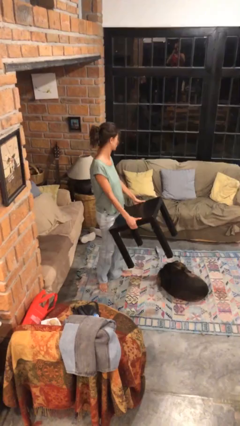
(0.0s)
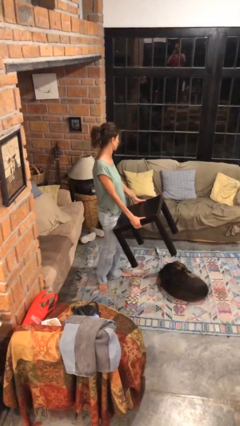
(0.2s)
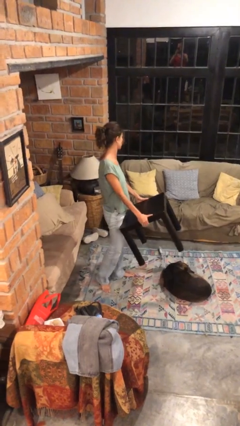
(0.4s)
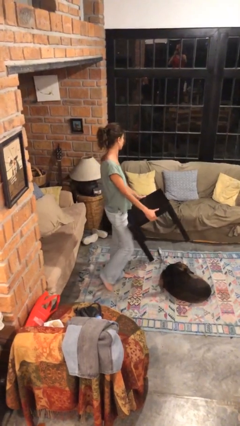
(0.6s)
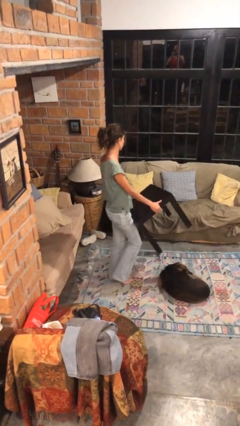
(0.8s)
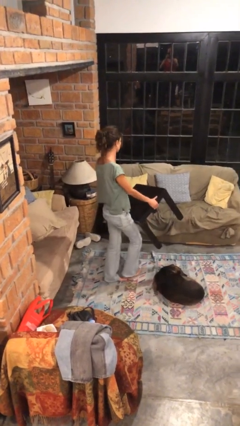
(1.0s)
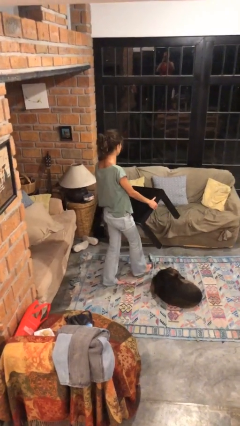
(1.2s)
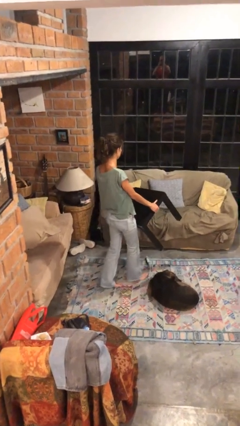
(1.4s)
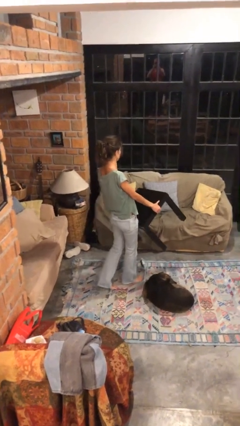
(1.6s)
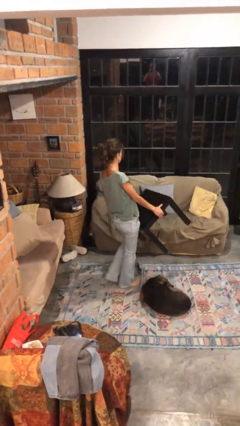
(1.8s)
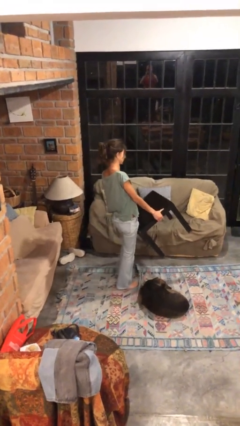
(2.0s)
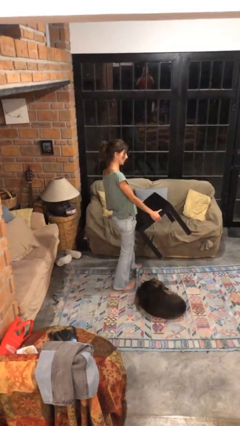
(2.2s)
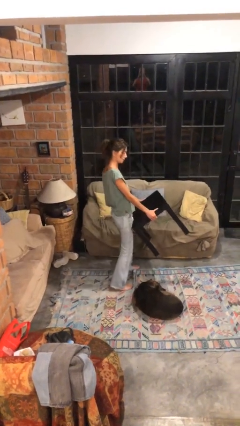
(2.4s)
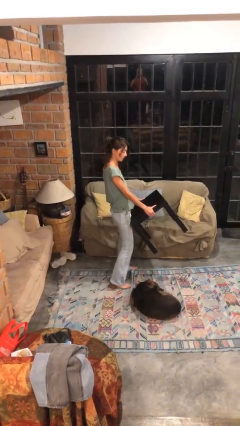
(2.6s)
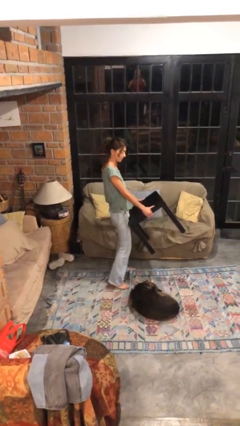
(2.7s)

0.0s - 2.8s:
person carries furniture

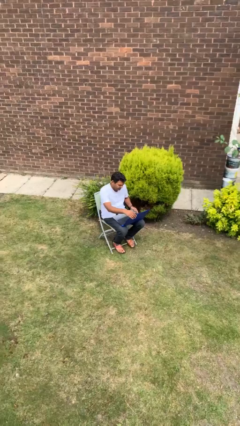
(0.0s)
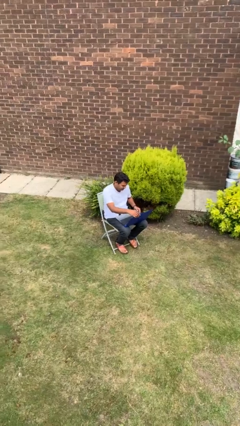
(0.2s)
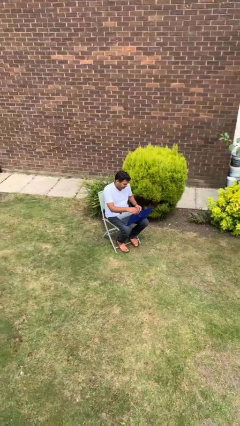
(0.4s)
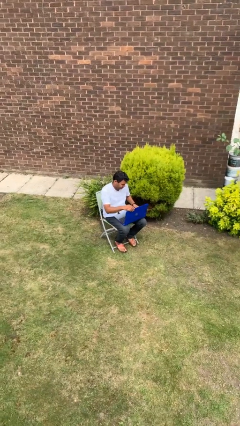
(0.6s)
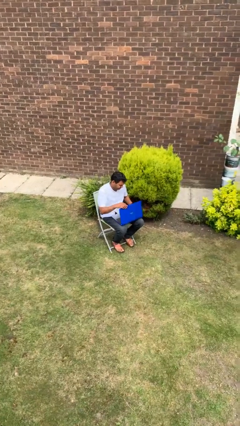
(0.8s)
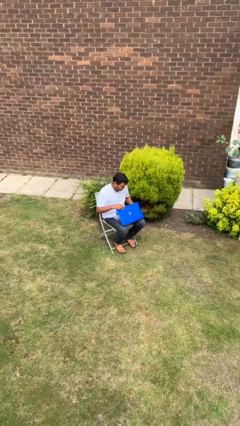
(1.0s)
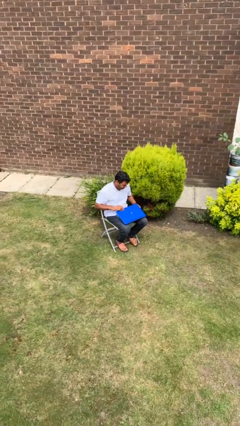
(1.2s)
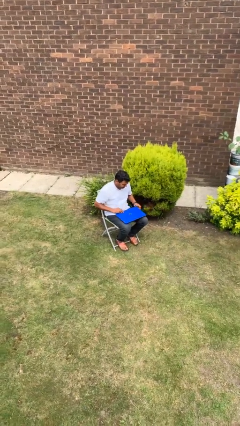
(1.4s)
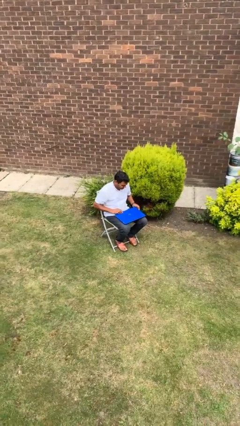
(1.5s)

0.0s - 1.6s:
person closes laptop

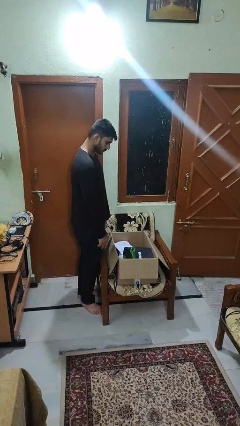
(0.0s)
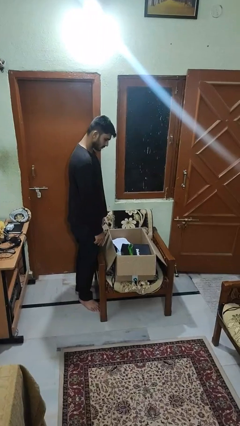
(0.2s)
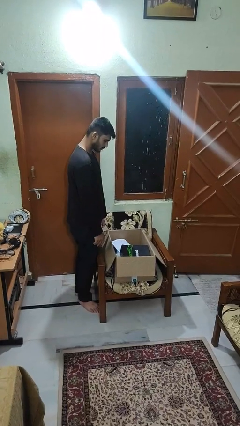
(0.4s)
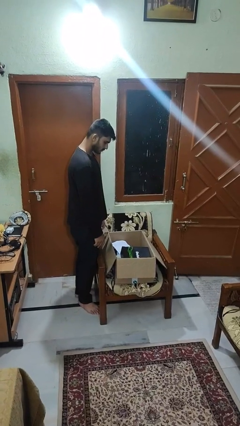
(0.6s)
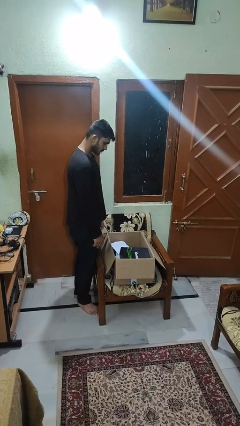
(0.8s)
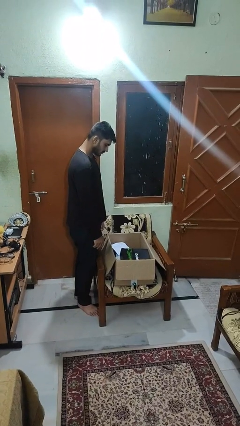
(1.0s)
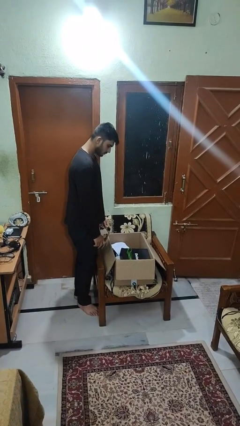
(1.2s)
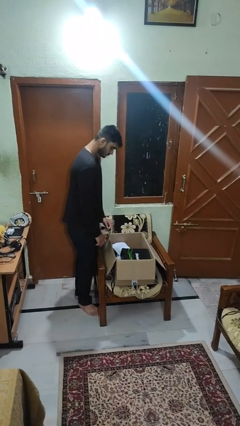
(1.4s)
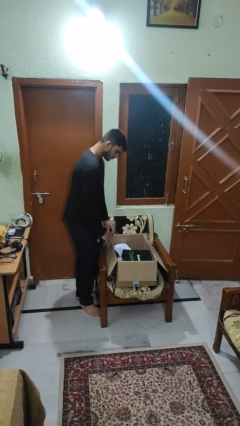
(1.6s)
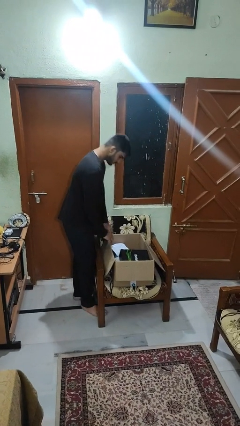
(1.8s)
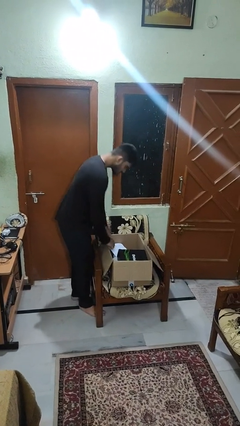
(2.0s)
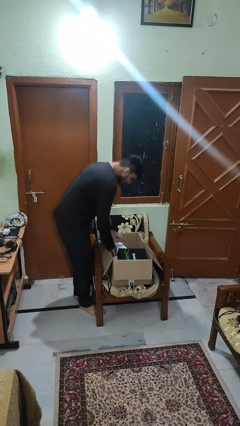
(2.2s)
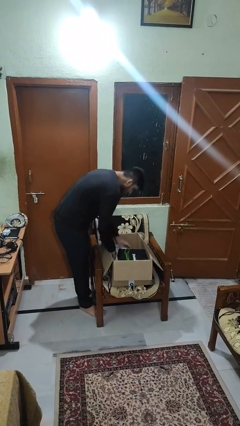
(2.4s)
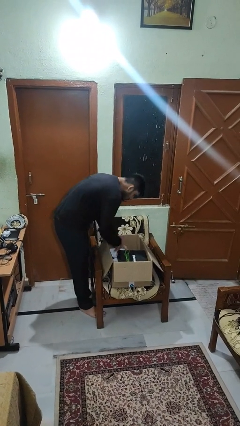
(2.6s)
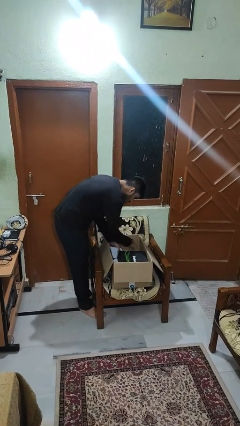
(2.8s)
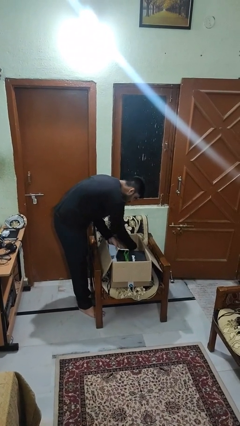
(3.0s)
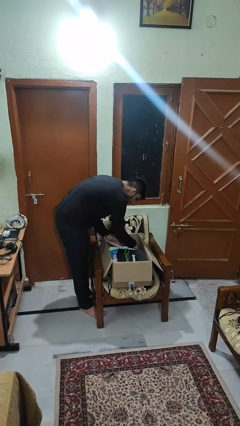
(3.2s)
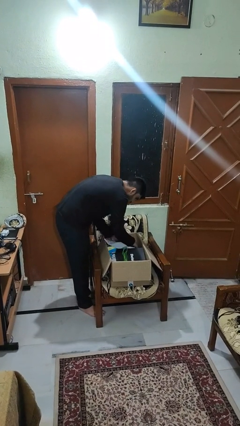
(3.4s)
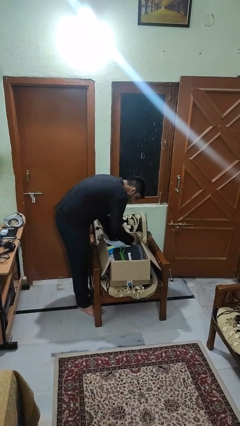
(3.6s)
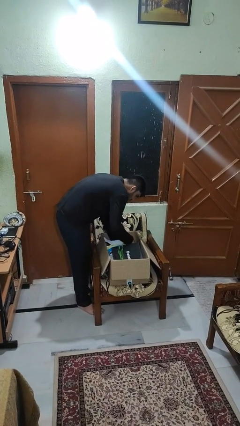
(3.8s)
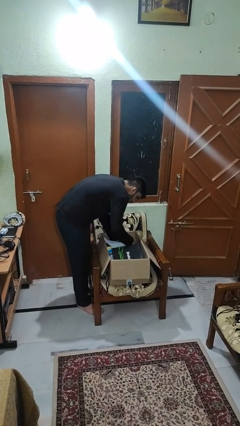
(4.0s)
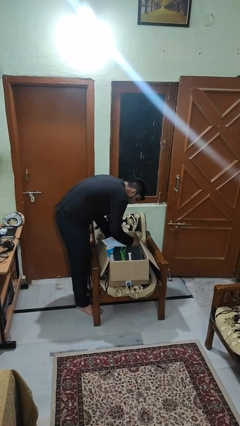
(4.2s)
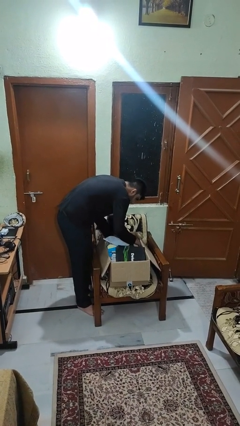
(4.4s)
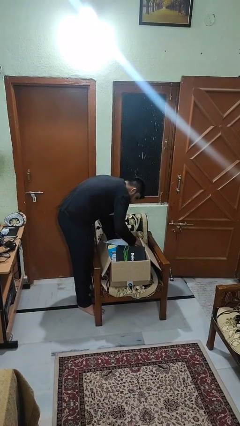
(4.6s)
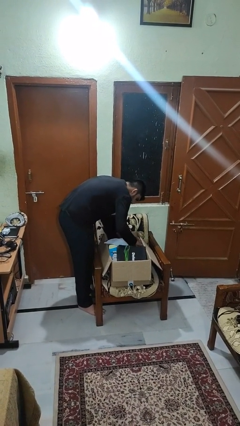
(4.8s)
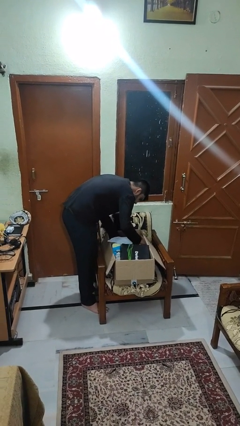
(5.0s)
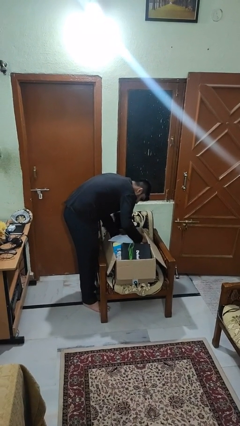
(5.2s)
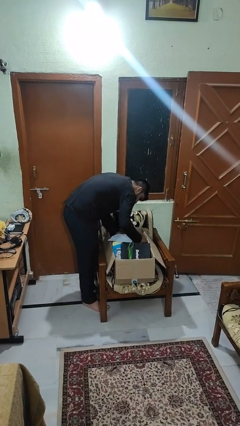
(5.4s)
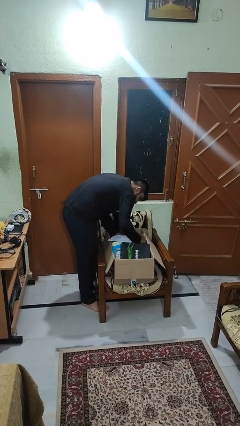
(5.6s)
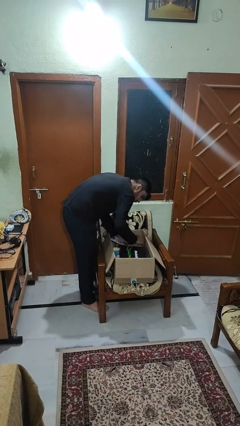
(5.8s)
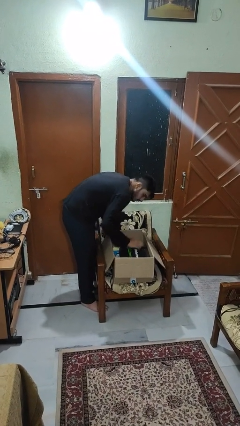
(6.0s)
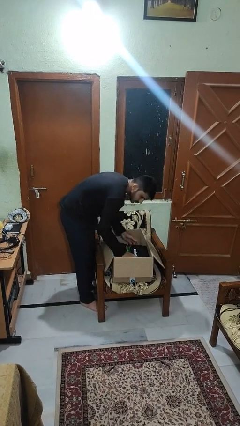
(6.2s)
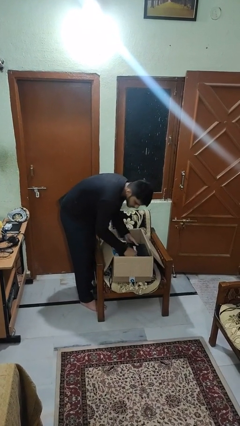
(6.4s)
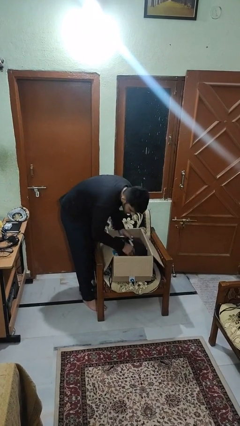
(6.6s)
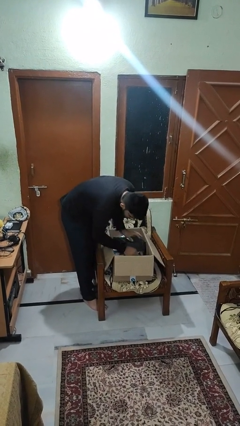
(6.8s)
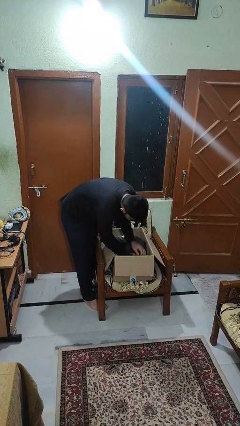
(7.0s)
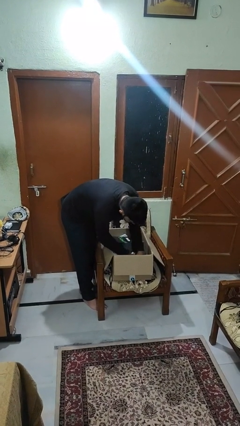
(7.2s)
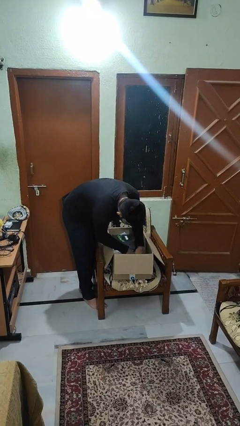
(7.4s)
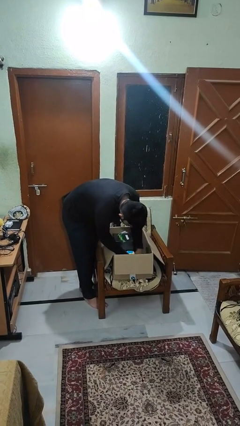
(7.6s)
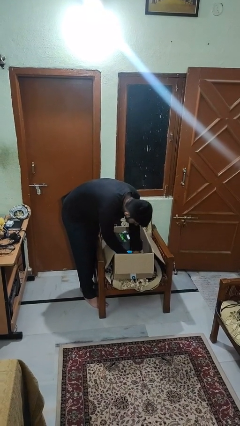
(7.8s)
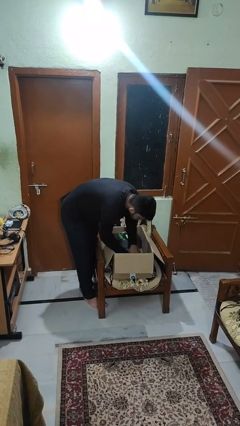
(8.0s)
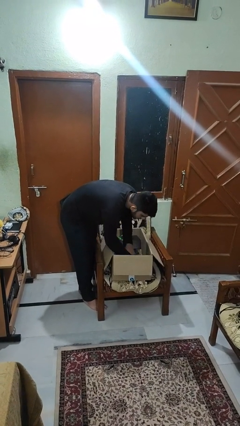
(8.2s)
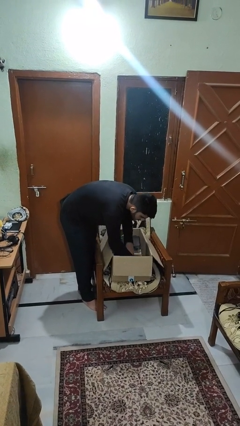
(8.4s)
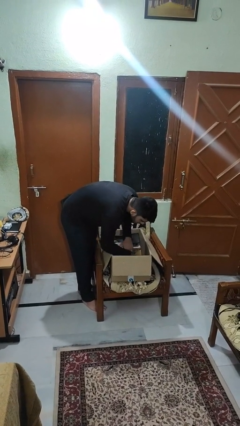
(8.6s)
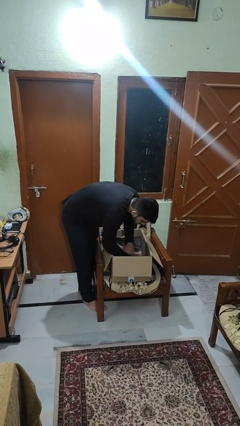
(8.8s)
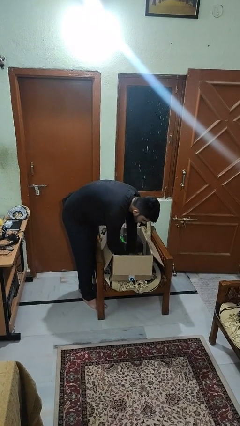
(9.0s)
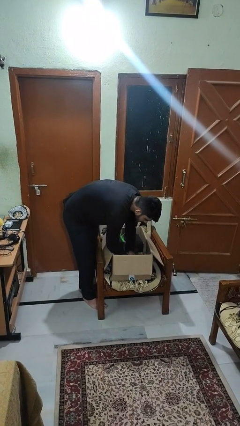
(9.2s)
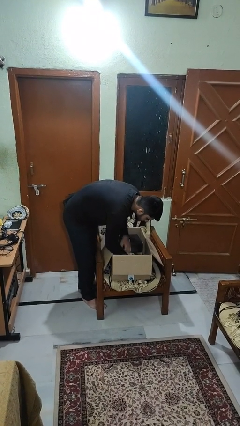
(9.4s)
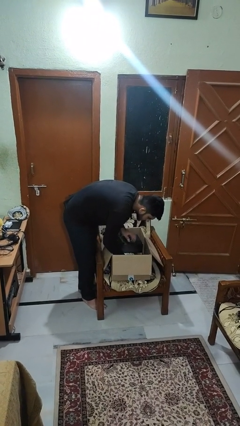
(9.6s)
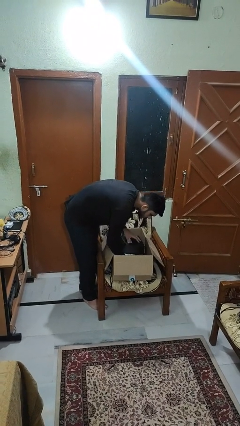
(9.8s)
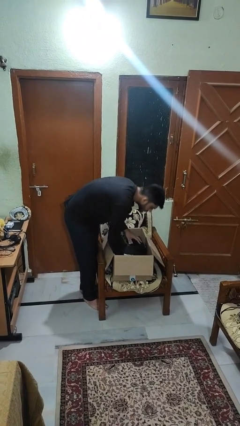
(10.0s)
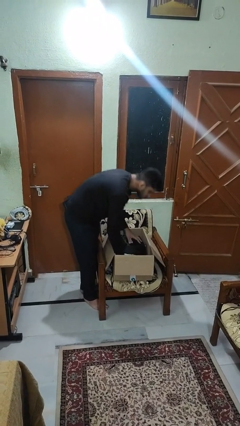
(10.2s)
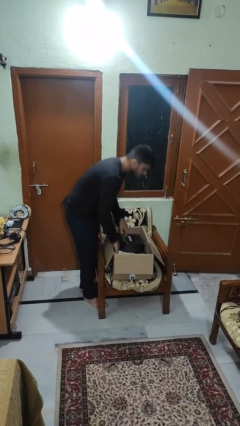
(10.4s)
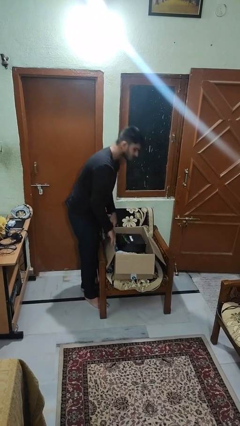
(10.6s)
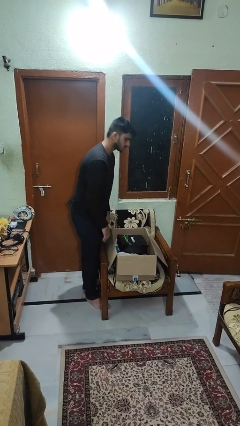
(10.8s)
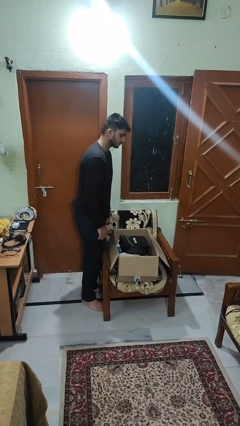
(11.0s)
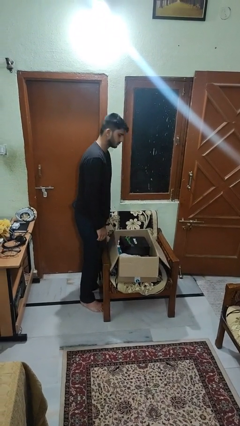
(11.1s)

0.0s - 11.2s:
person searches in box

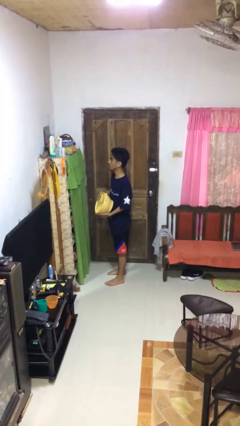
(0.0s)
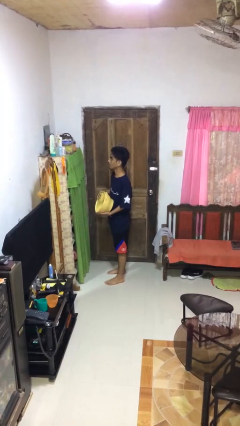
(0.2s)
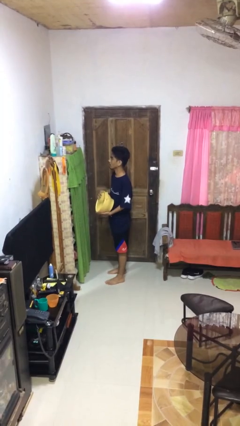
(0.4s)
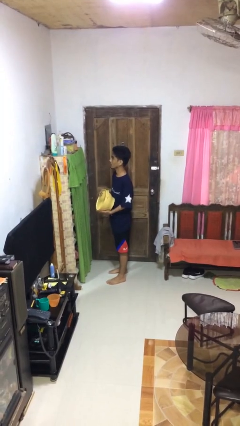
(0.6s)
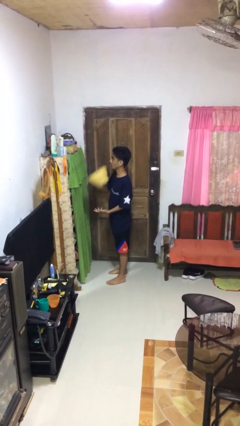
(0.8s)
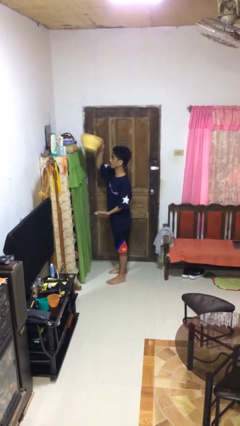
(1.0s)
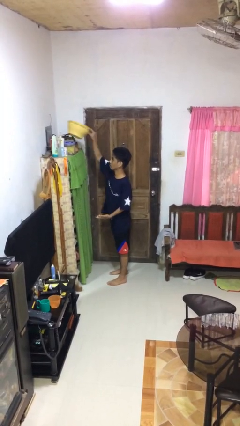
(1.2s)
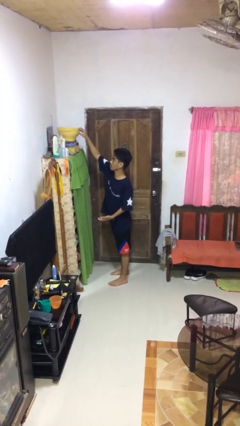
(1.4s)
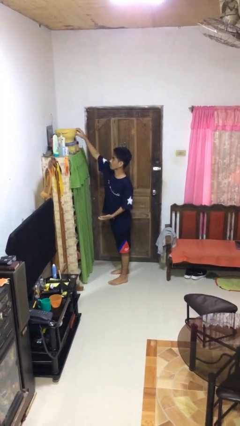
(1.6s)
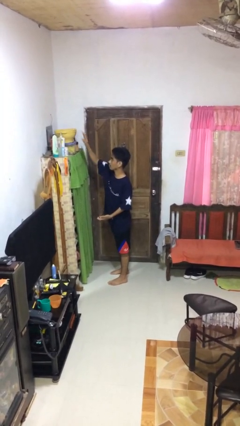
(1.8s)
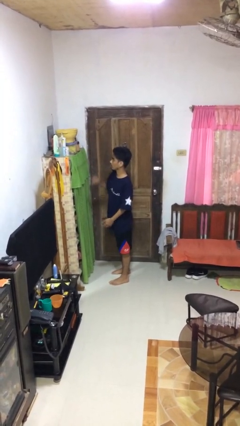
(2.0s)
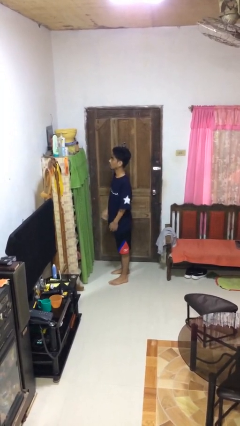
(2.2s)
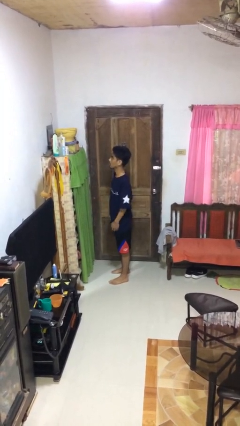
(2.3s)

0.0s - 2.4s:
person puts down object on shelf
